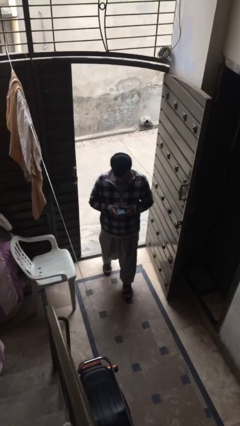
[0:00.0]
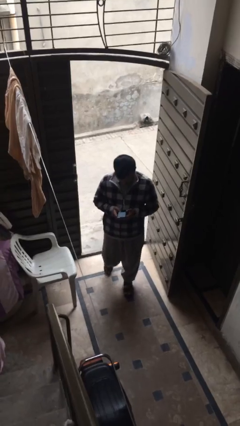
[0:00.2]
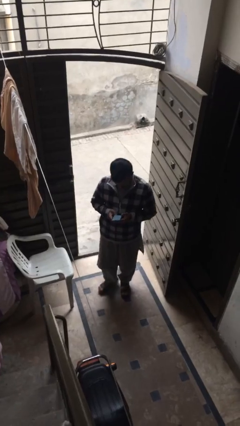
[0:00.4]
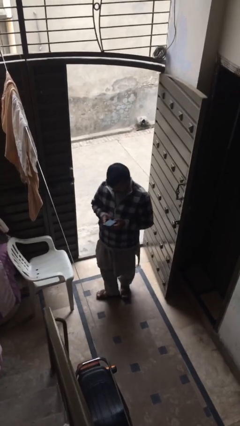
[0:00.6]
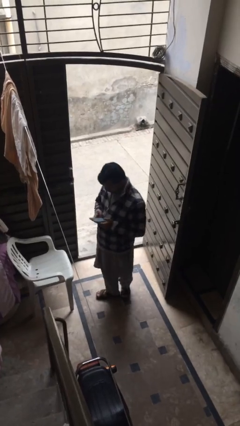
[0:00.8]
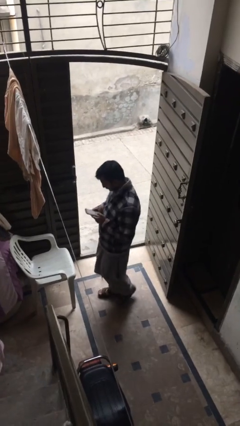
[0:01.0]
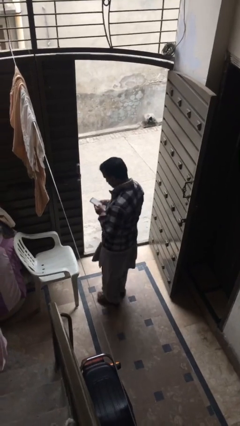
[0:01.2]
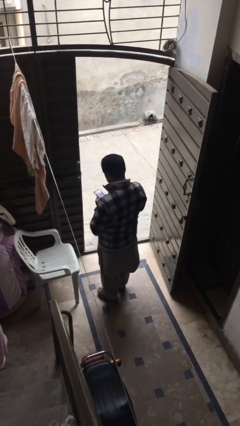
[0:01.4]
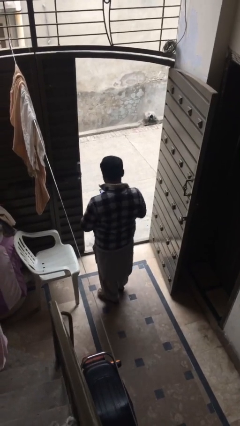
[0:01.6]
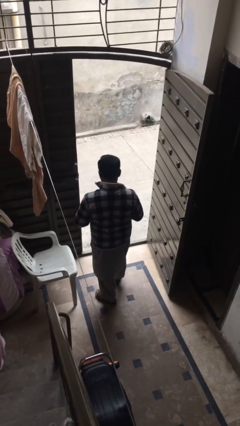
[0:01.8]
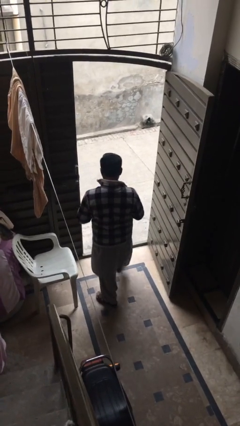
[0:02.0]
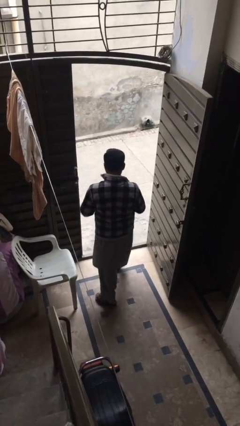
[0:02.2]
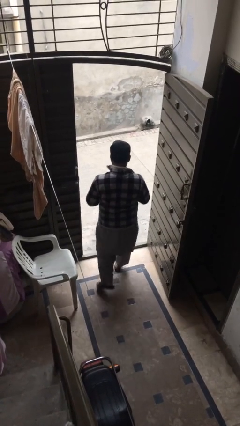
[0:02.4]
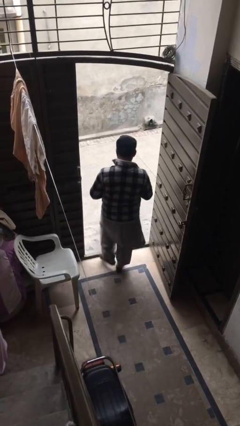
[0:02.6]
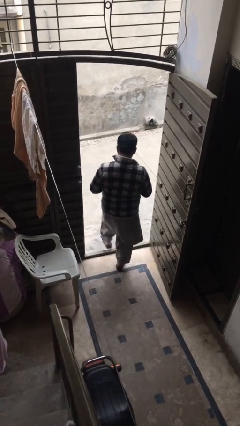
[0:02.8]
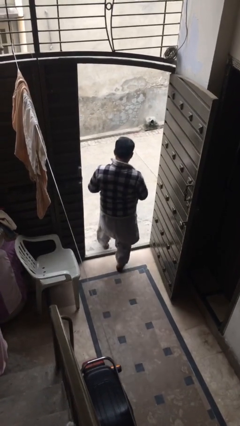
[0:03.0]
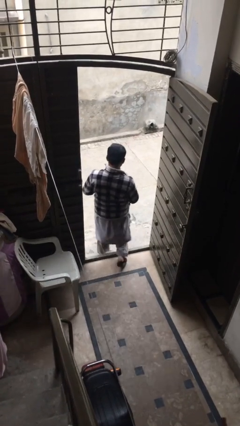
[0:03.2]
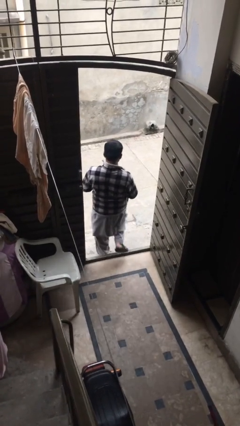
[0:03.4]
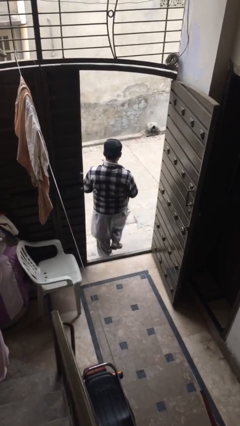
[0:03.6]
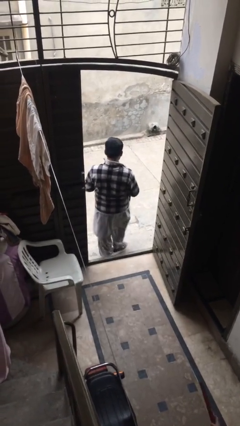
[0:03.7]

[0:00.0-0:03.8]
person exits scene through structure

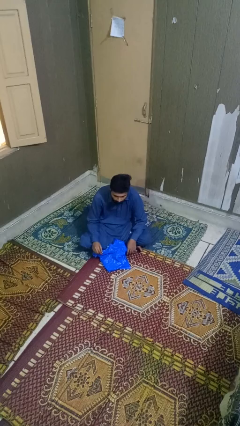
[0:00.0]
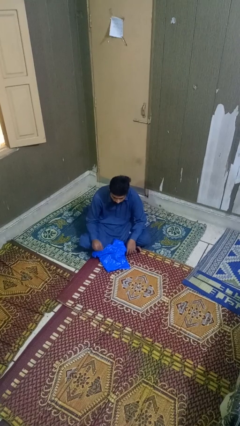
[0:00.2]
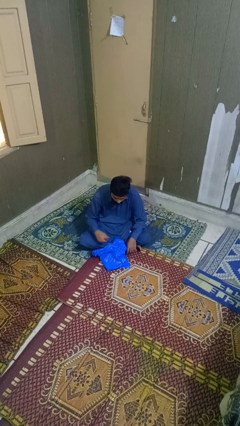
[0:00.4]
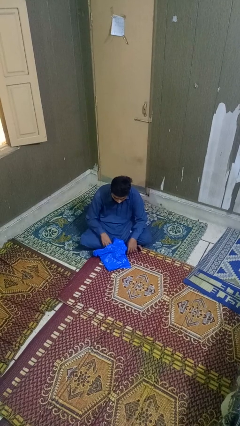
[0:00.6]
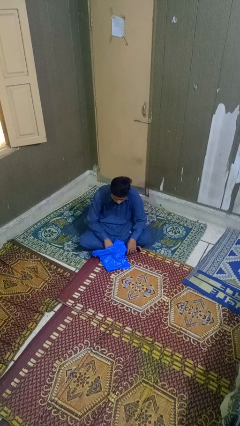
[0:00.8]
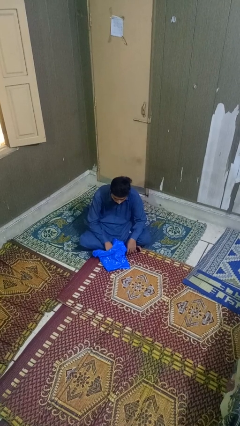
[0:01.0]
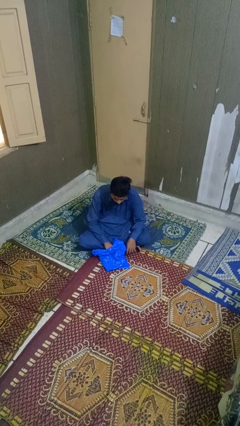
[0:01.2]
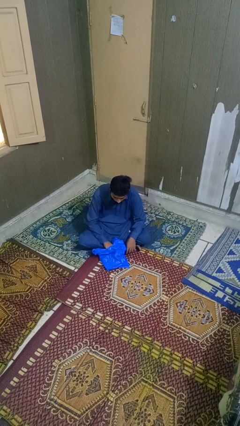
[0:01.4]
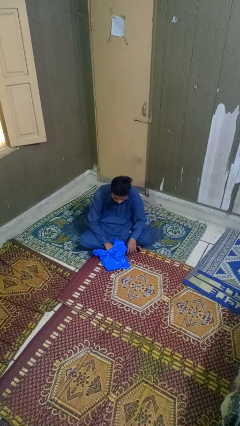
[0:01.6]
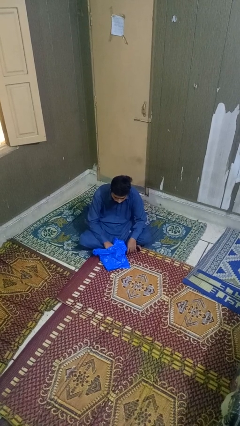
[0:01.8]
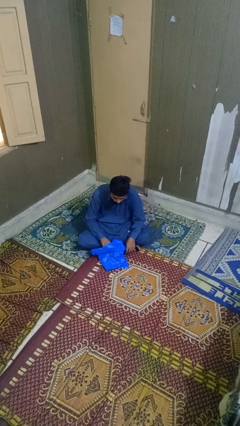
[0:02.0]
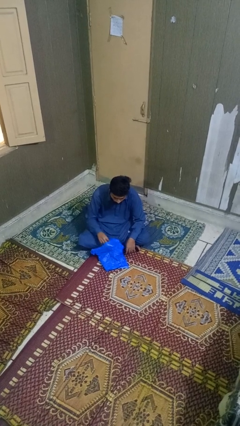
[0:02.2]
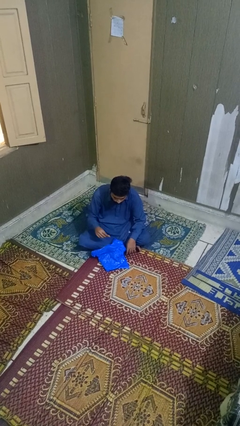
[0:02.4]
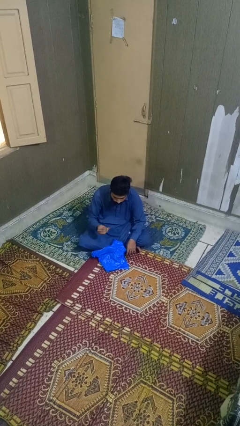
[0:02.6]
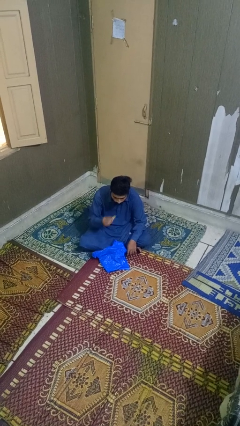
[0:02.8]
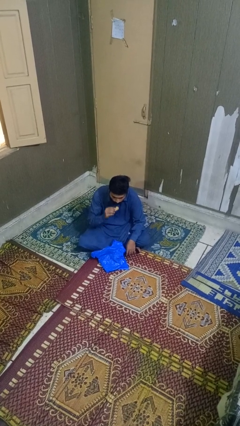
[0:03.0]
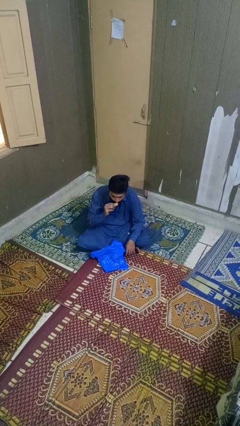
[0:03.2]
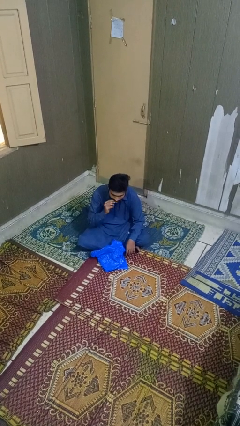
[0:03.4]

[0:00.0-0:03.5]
person eats snack from bag

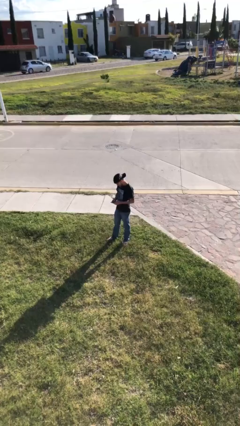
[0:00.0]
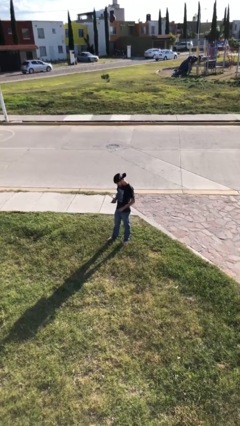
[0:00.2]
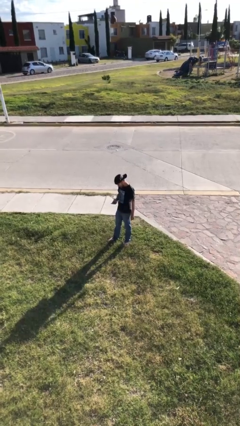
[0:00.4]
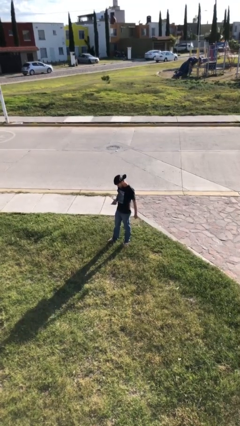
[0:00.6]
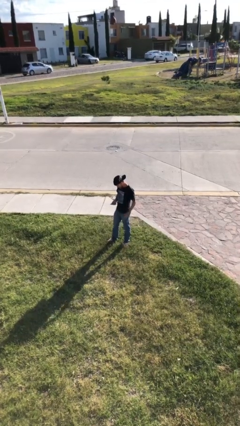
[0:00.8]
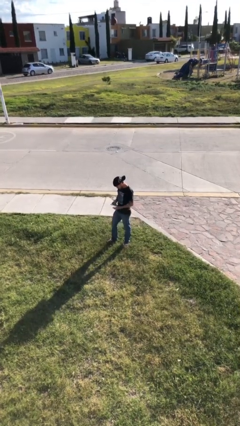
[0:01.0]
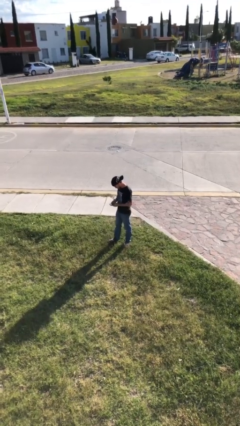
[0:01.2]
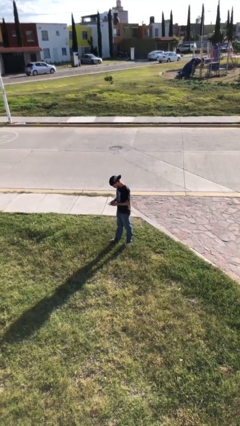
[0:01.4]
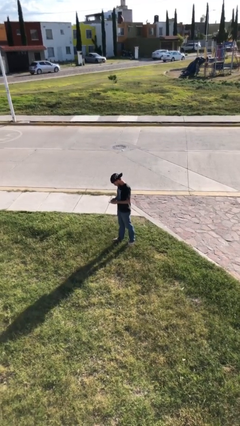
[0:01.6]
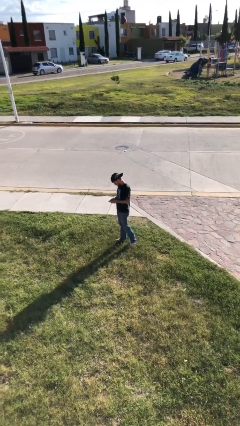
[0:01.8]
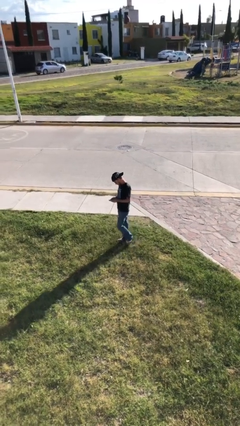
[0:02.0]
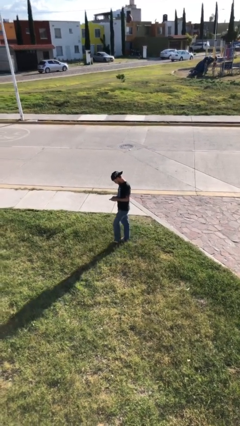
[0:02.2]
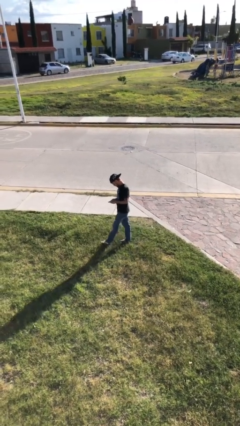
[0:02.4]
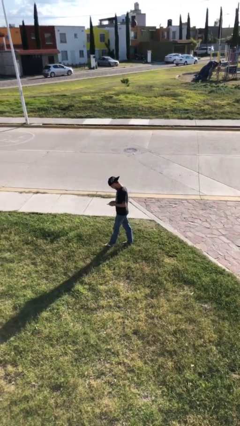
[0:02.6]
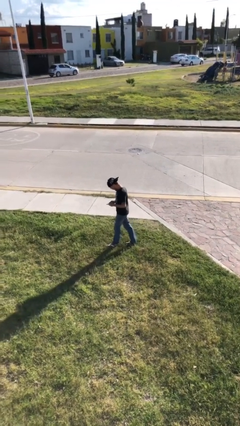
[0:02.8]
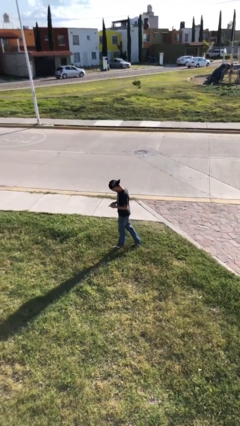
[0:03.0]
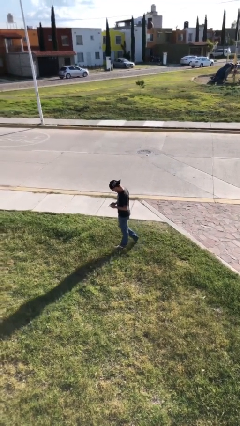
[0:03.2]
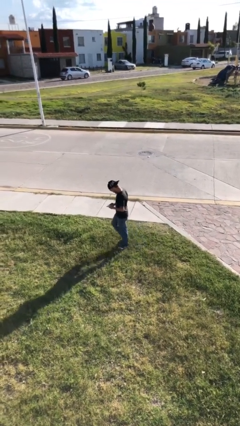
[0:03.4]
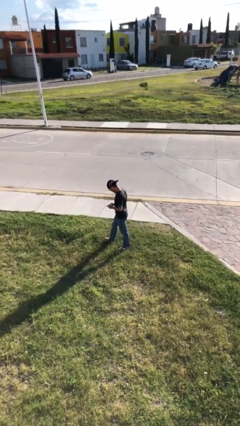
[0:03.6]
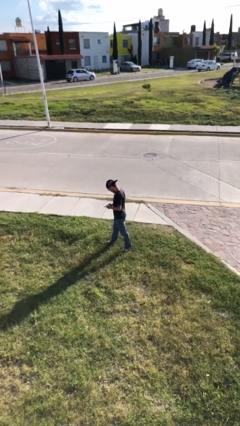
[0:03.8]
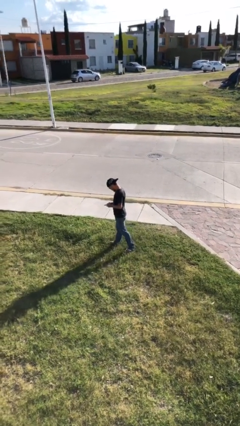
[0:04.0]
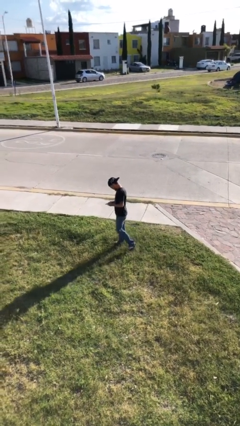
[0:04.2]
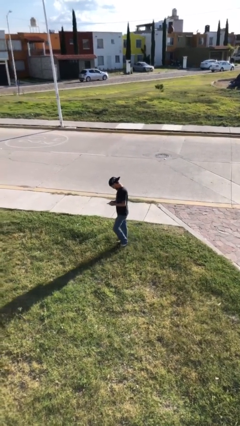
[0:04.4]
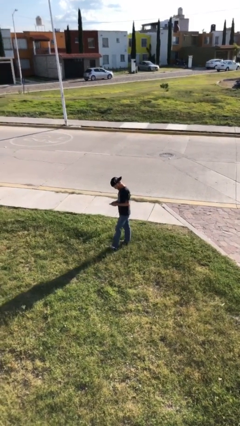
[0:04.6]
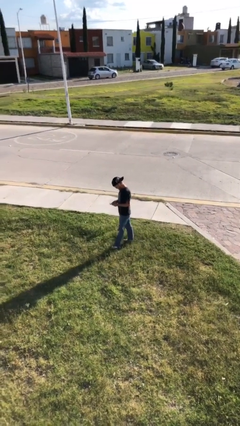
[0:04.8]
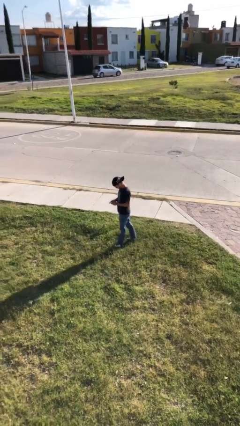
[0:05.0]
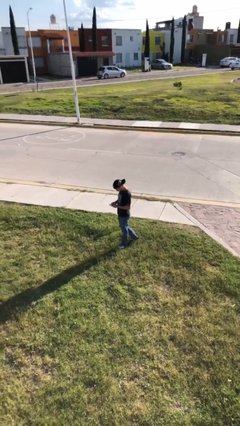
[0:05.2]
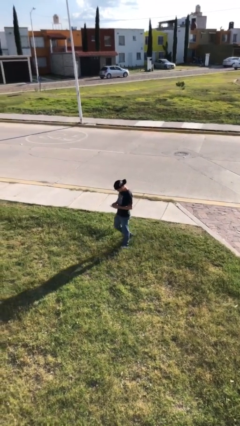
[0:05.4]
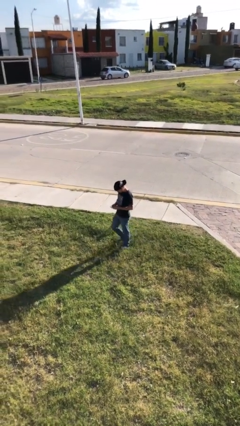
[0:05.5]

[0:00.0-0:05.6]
person texts on phone

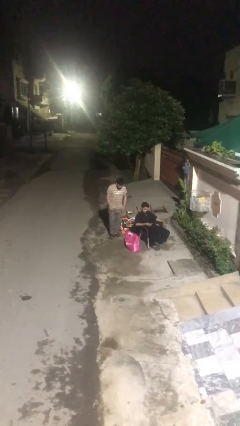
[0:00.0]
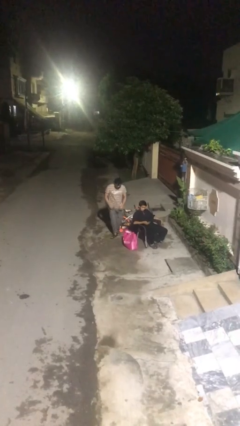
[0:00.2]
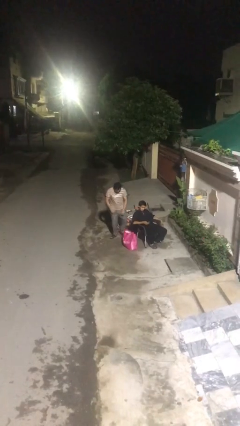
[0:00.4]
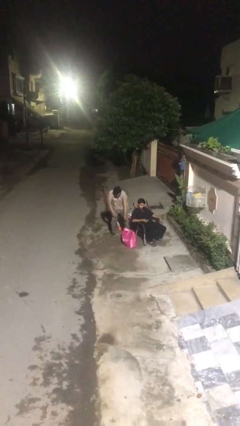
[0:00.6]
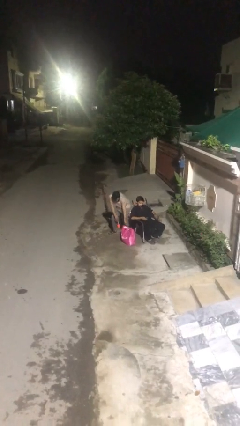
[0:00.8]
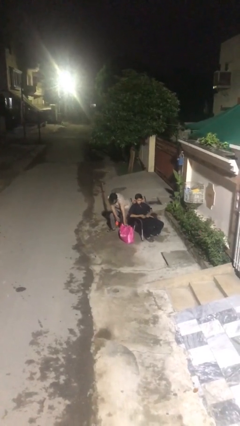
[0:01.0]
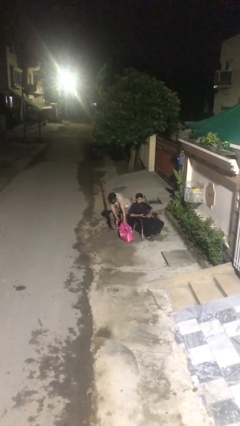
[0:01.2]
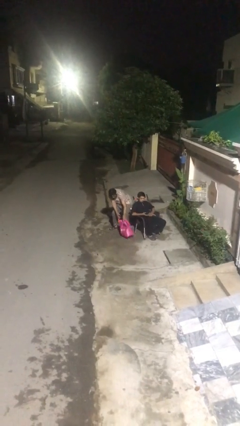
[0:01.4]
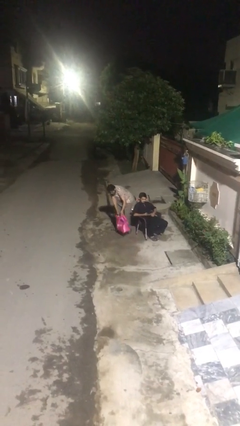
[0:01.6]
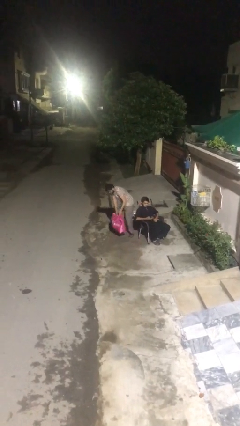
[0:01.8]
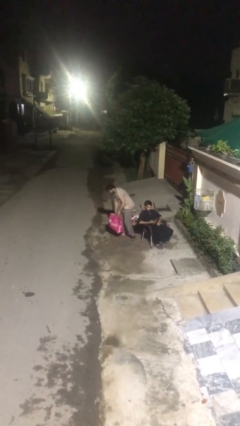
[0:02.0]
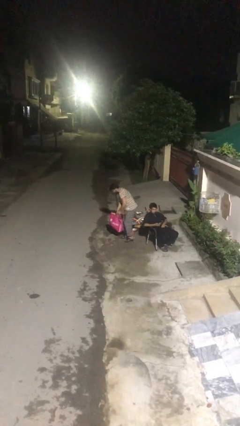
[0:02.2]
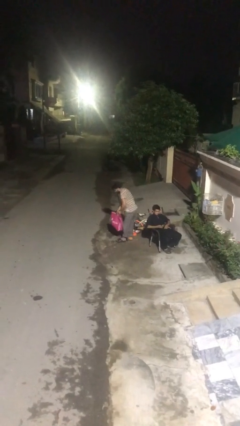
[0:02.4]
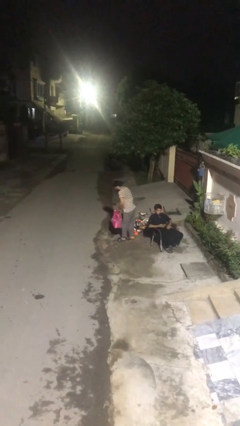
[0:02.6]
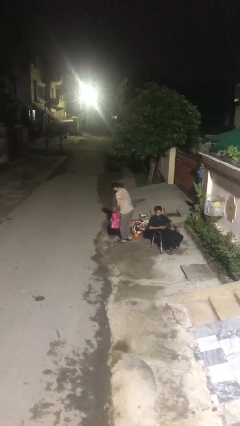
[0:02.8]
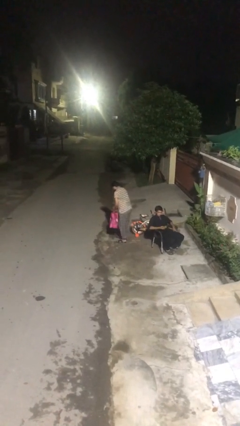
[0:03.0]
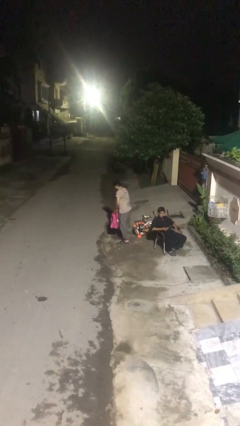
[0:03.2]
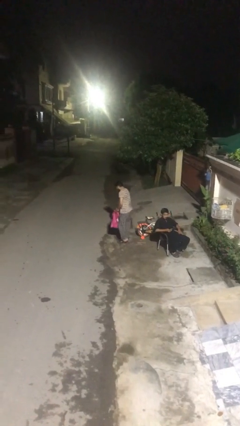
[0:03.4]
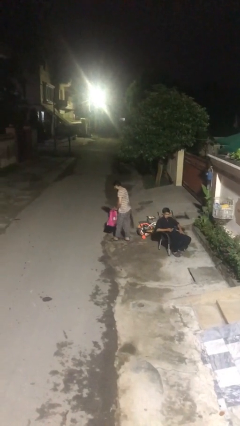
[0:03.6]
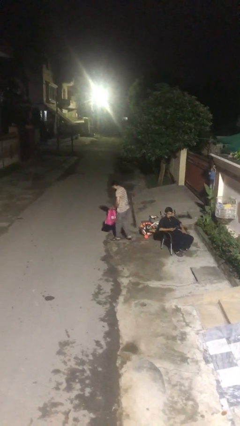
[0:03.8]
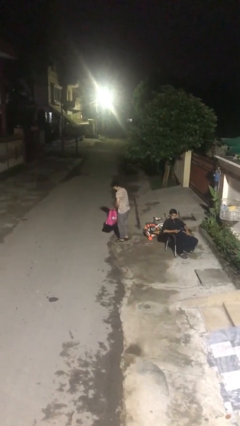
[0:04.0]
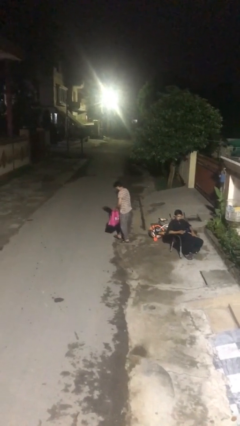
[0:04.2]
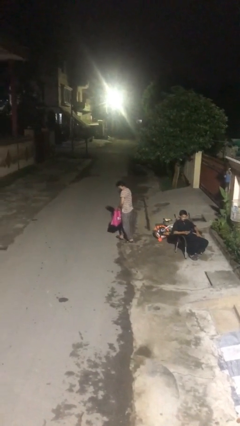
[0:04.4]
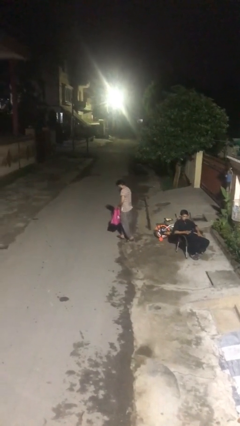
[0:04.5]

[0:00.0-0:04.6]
person steals object from person
